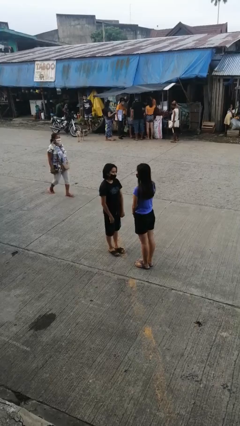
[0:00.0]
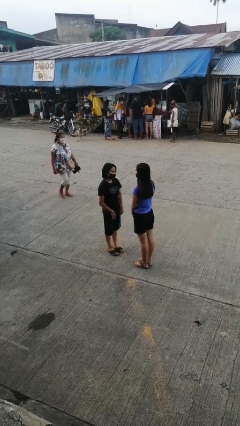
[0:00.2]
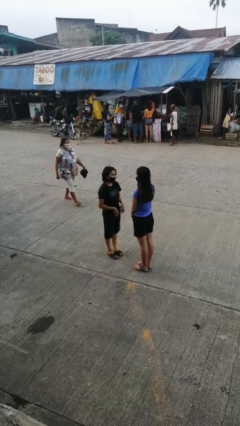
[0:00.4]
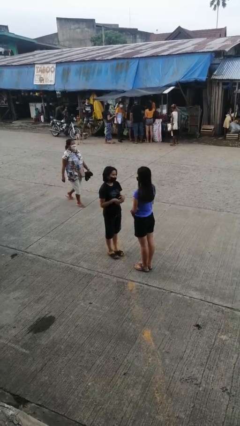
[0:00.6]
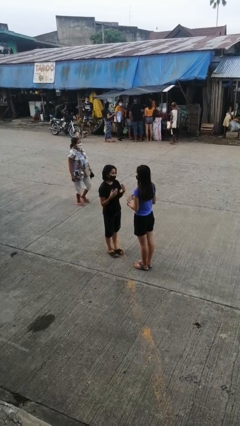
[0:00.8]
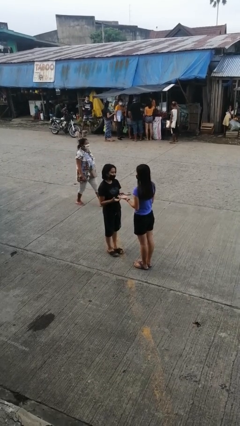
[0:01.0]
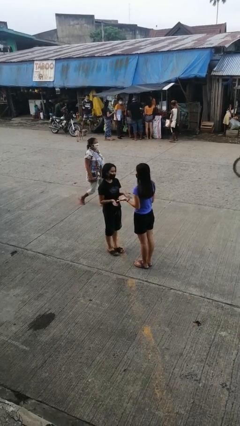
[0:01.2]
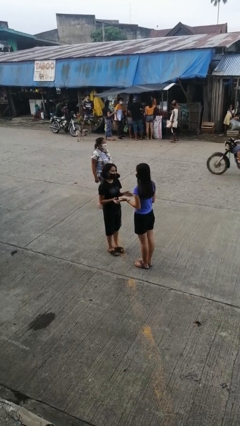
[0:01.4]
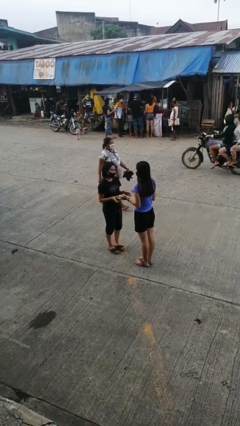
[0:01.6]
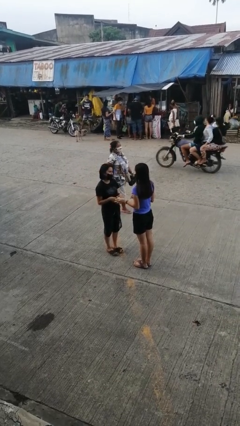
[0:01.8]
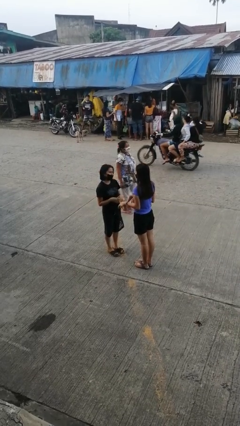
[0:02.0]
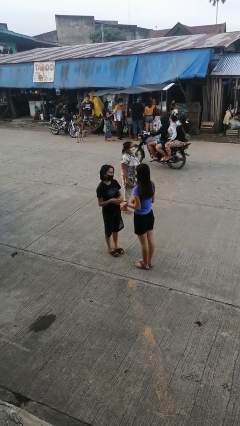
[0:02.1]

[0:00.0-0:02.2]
person talks to person

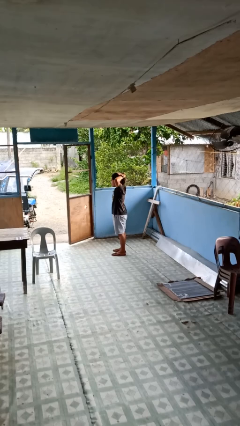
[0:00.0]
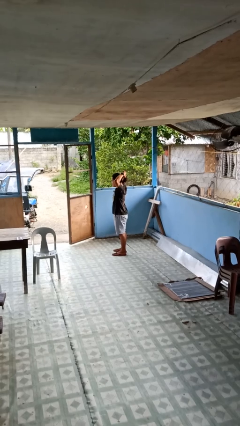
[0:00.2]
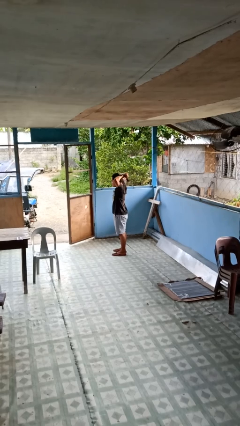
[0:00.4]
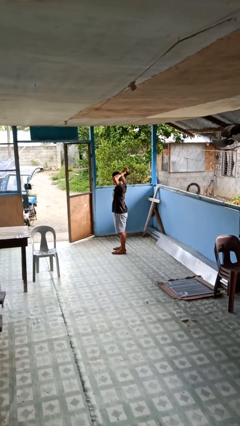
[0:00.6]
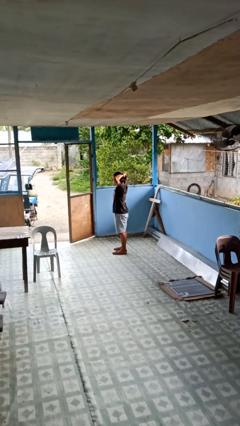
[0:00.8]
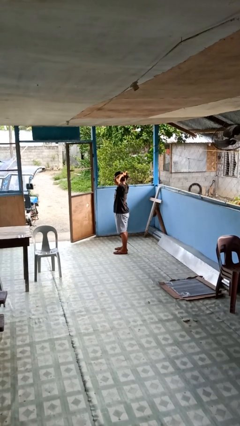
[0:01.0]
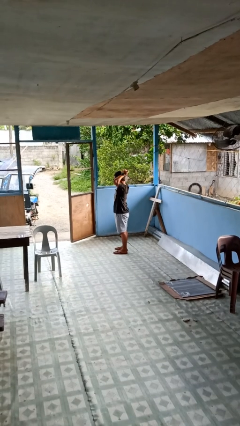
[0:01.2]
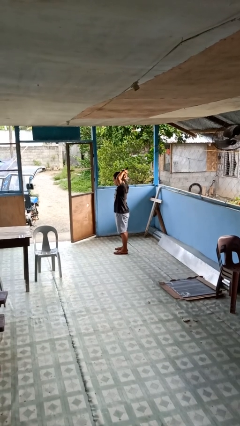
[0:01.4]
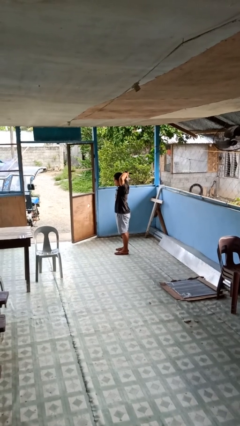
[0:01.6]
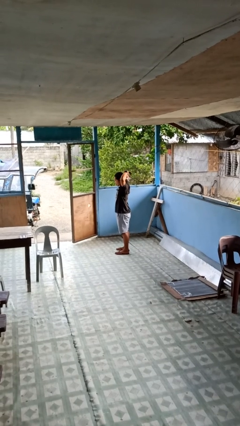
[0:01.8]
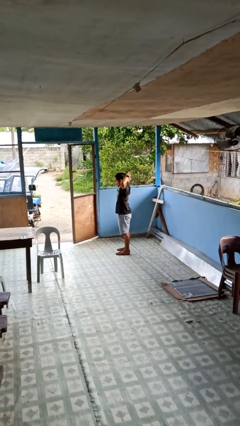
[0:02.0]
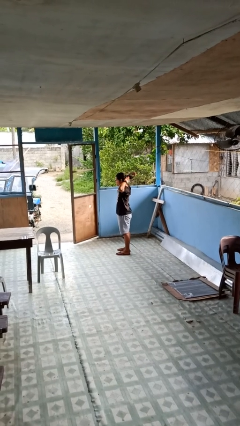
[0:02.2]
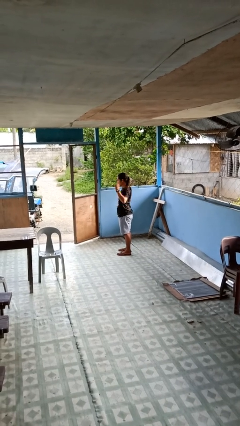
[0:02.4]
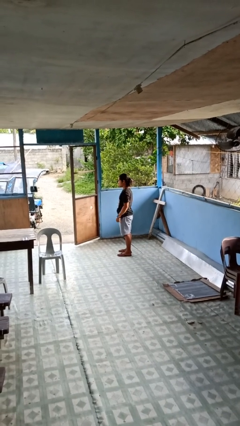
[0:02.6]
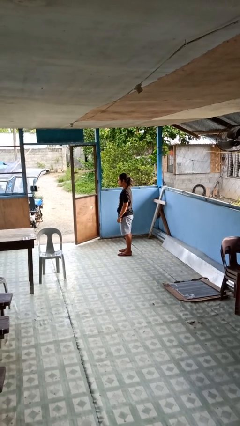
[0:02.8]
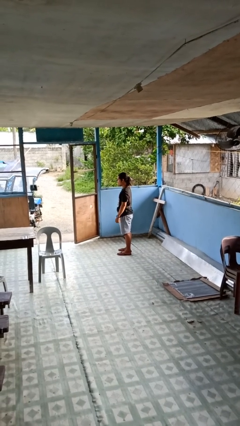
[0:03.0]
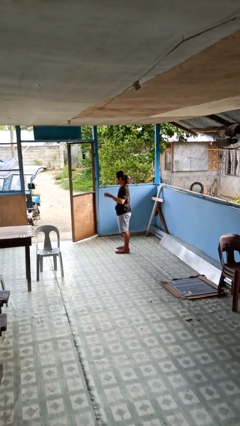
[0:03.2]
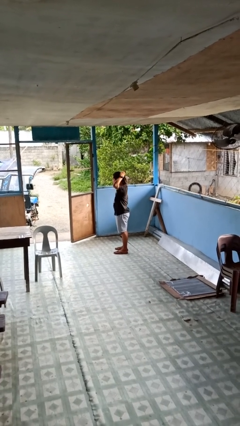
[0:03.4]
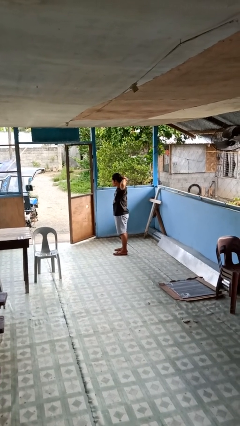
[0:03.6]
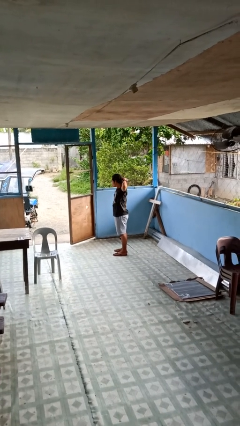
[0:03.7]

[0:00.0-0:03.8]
person puts hair in ponytail

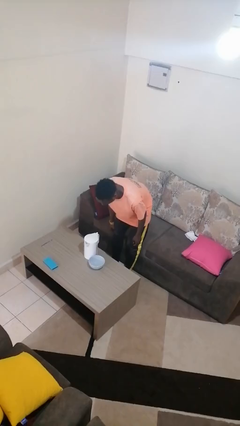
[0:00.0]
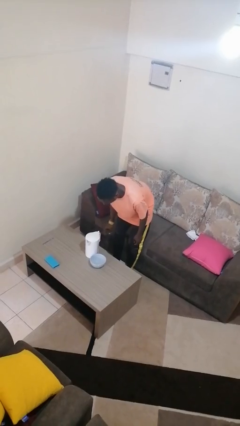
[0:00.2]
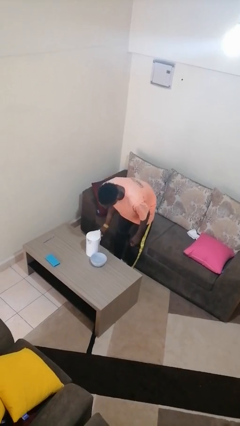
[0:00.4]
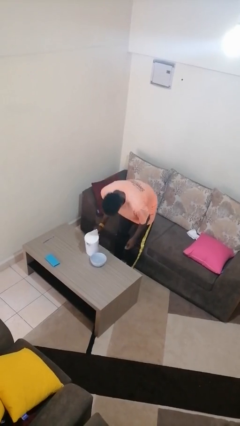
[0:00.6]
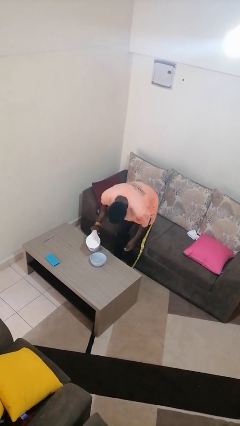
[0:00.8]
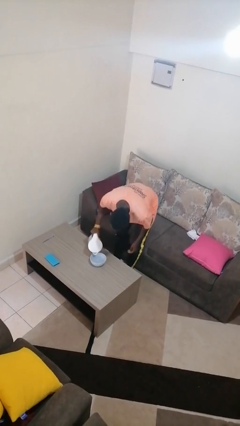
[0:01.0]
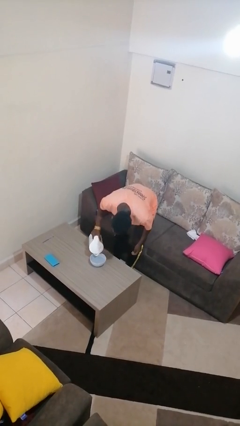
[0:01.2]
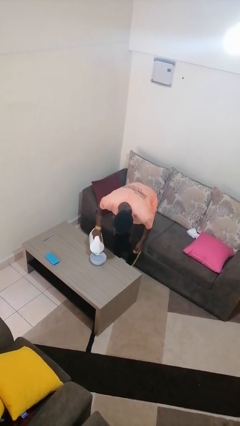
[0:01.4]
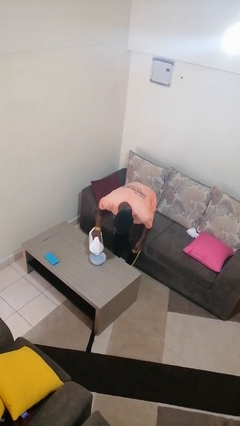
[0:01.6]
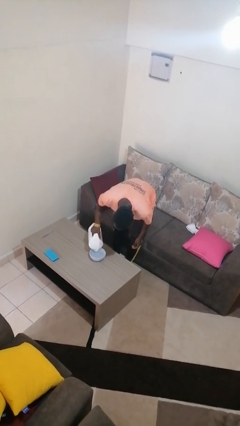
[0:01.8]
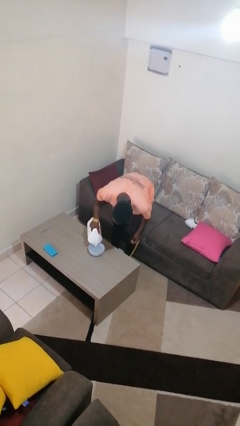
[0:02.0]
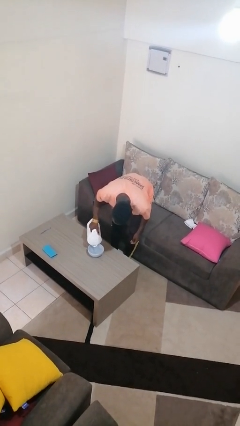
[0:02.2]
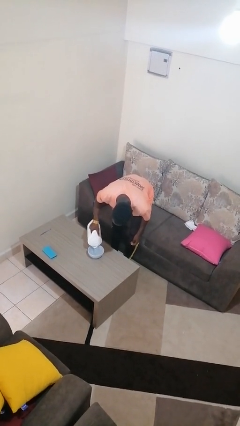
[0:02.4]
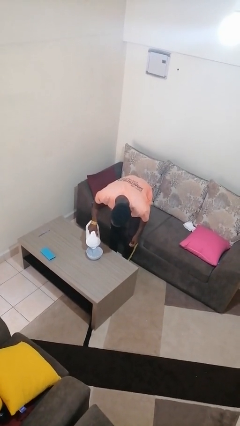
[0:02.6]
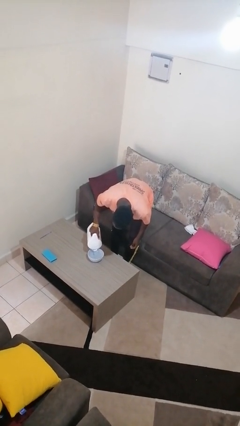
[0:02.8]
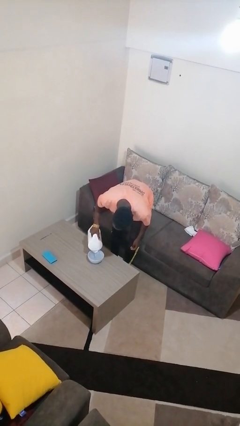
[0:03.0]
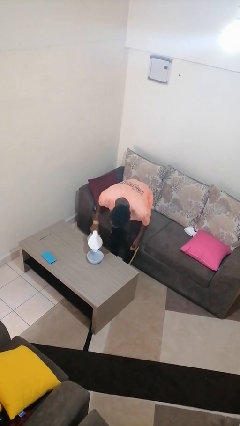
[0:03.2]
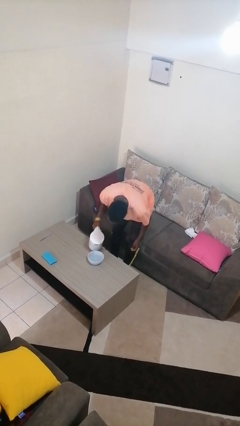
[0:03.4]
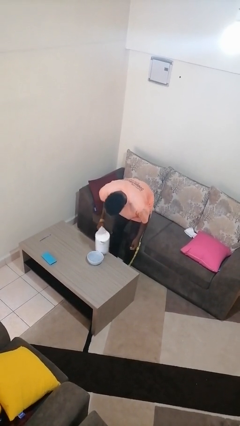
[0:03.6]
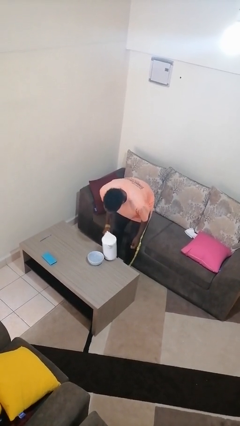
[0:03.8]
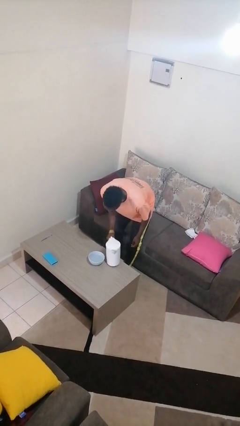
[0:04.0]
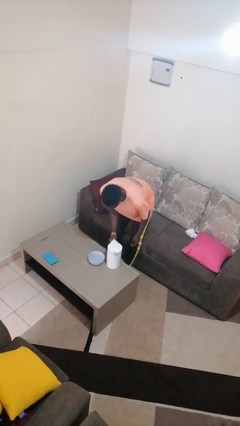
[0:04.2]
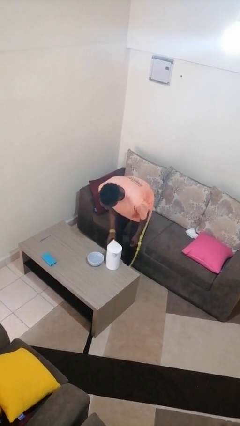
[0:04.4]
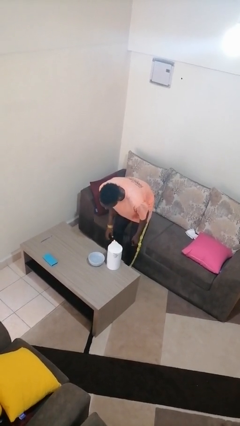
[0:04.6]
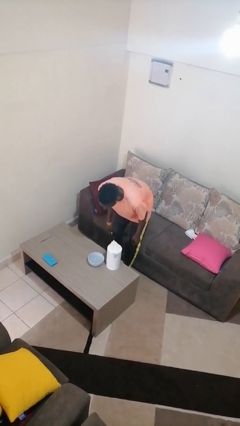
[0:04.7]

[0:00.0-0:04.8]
person pours into bowl

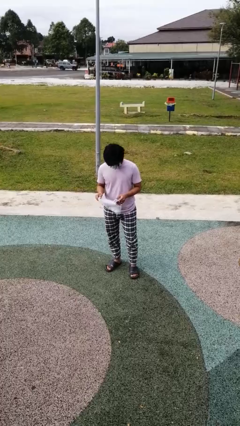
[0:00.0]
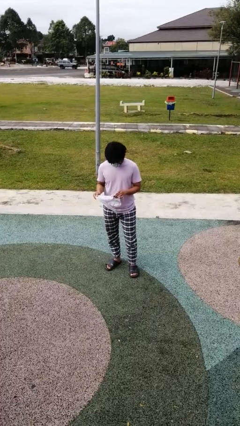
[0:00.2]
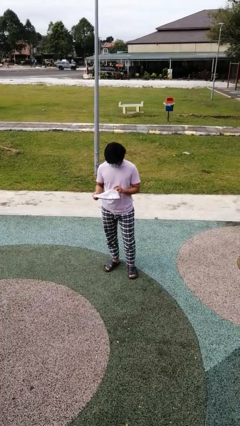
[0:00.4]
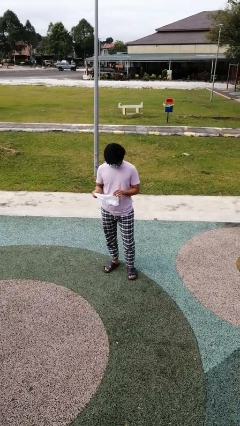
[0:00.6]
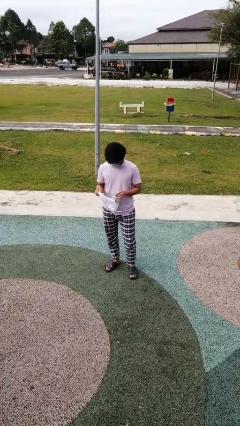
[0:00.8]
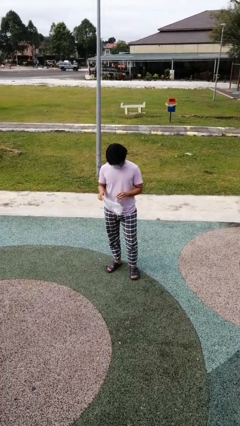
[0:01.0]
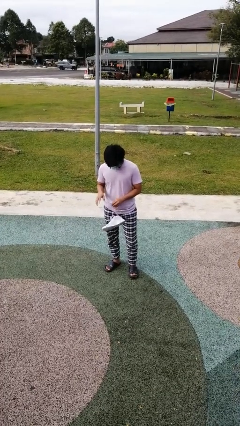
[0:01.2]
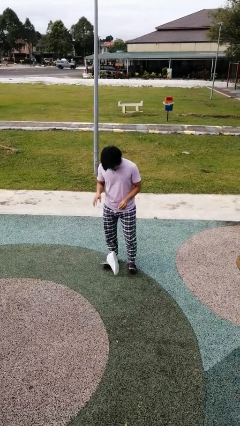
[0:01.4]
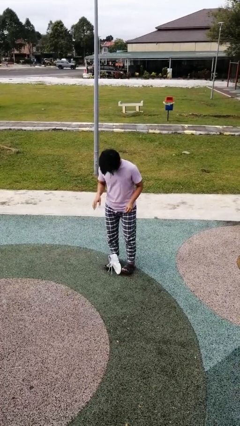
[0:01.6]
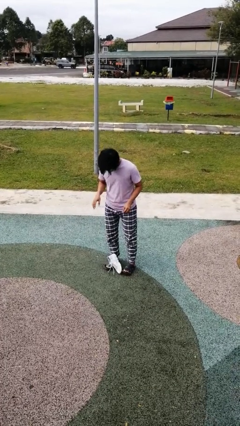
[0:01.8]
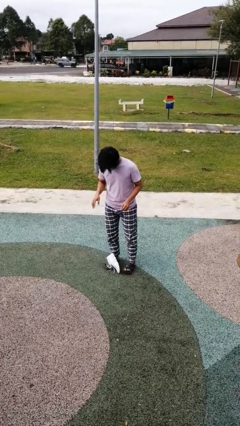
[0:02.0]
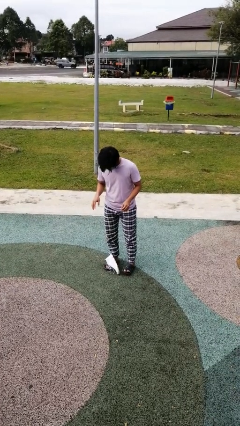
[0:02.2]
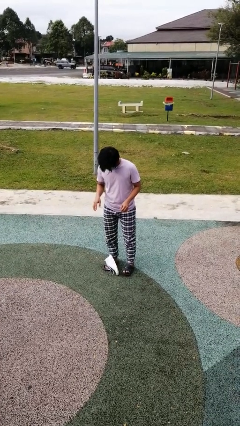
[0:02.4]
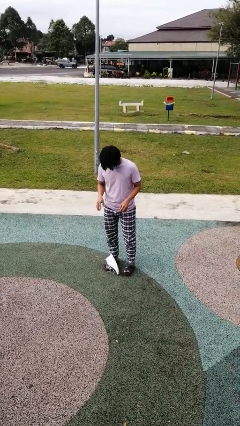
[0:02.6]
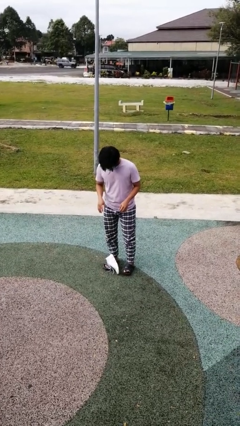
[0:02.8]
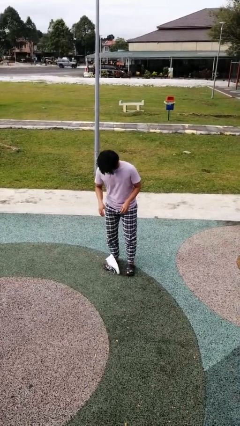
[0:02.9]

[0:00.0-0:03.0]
person drops object

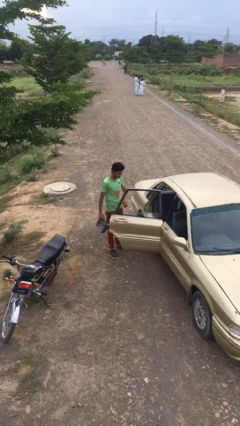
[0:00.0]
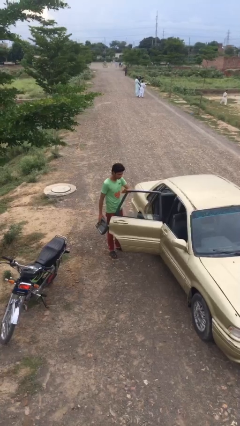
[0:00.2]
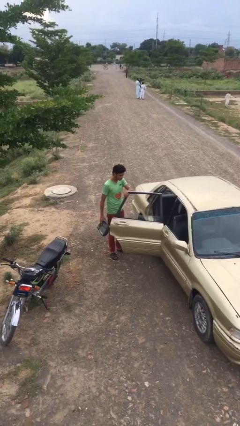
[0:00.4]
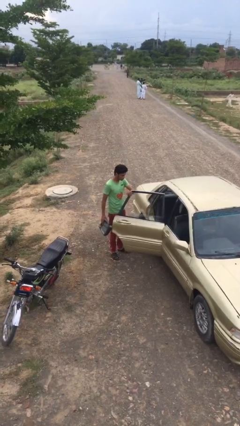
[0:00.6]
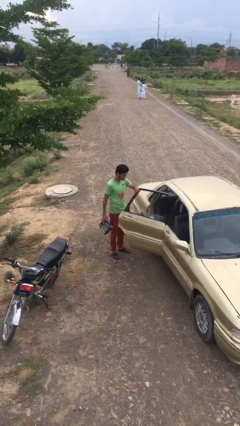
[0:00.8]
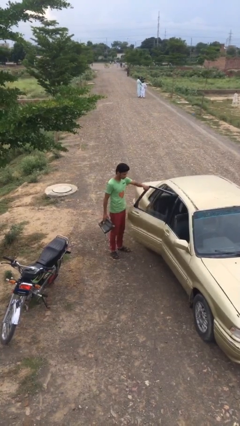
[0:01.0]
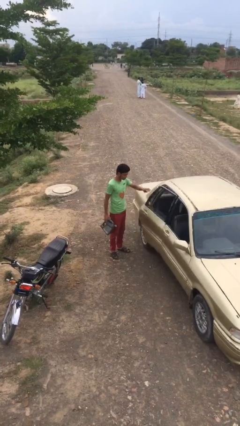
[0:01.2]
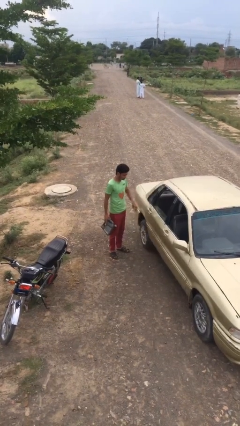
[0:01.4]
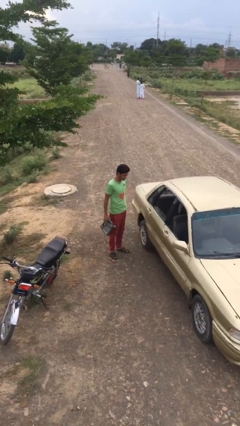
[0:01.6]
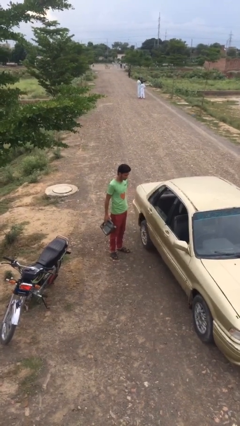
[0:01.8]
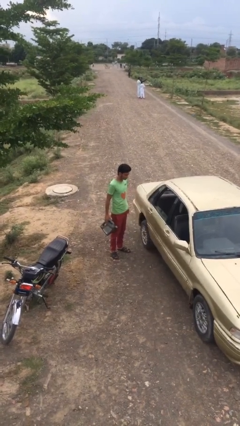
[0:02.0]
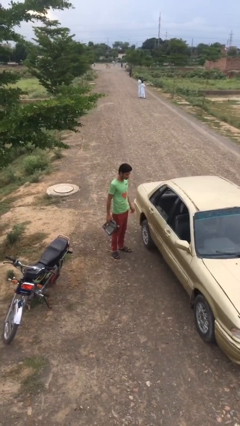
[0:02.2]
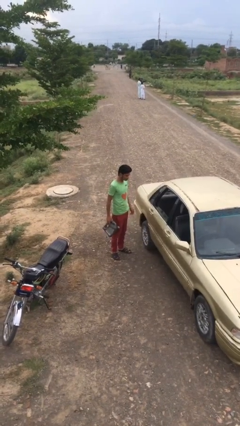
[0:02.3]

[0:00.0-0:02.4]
person closes car door

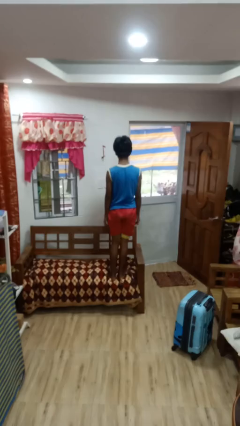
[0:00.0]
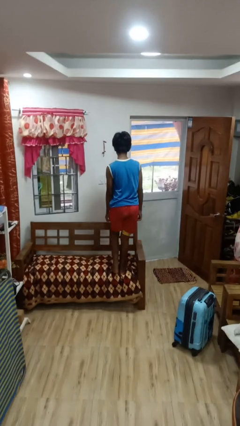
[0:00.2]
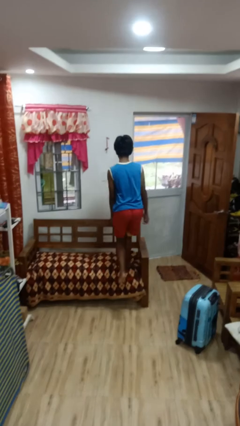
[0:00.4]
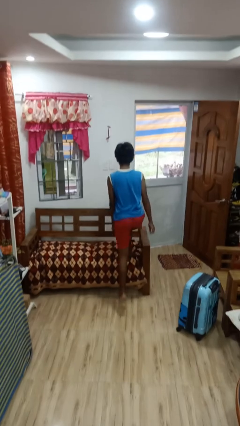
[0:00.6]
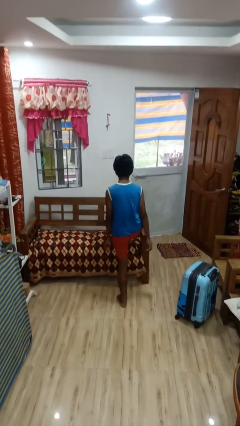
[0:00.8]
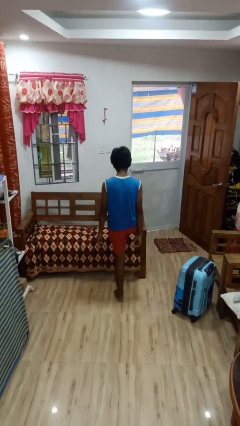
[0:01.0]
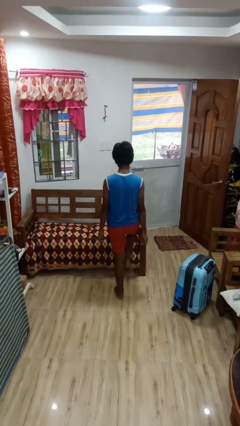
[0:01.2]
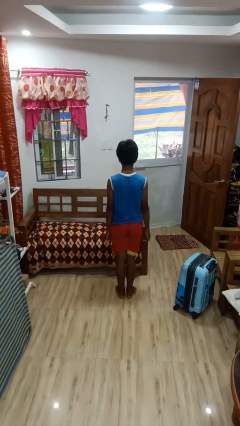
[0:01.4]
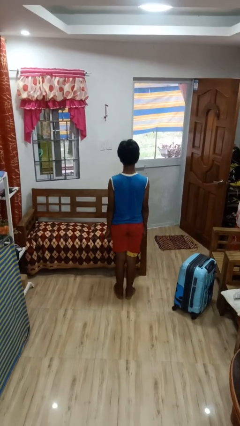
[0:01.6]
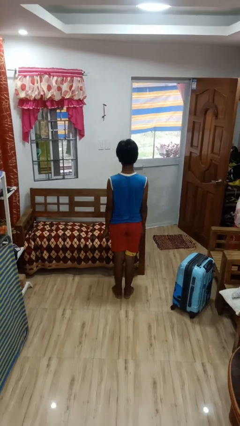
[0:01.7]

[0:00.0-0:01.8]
person climbs off couch
